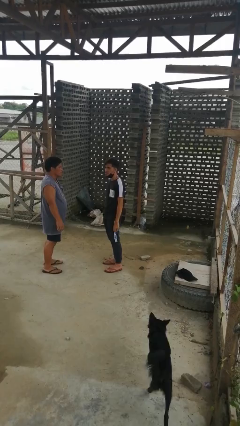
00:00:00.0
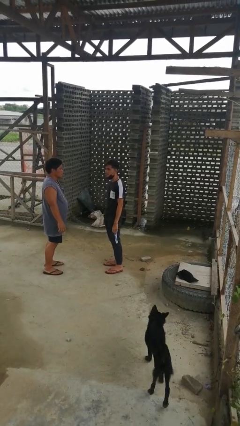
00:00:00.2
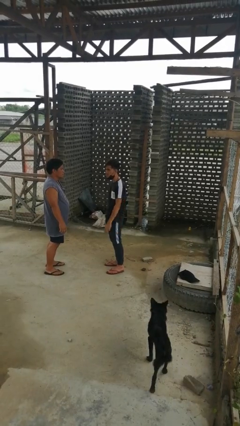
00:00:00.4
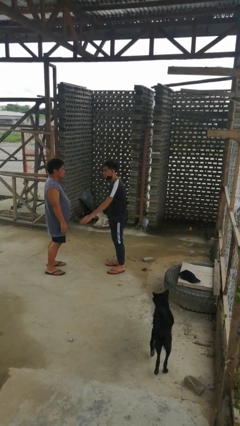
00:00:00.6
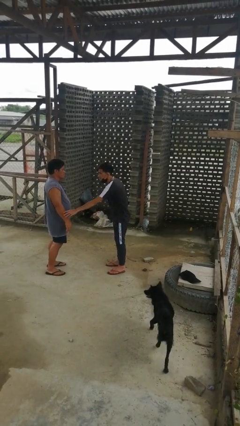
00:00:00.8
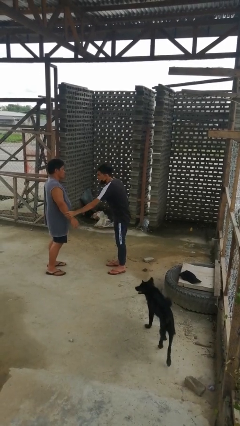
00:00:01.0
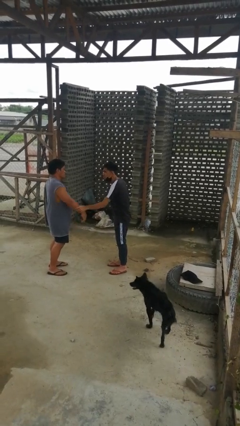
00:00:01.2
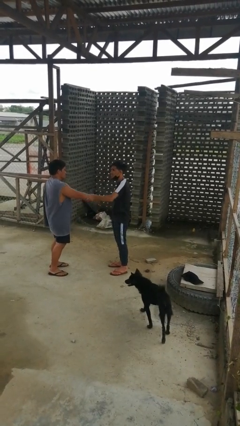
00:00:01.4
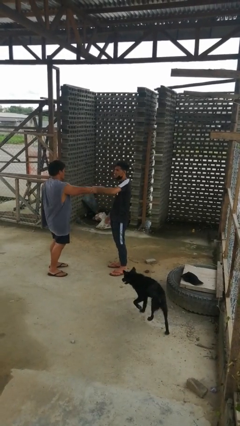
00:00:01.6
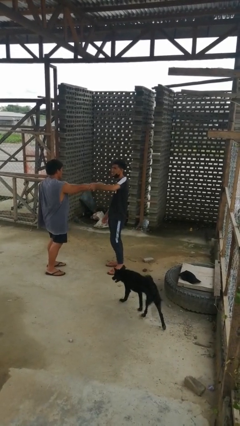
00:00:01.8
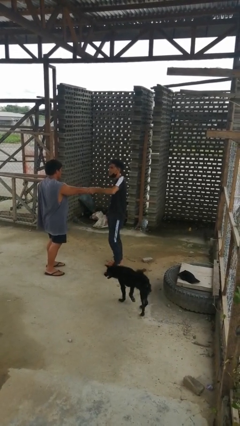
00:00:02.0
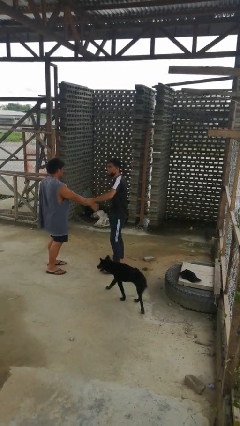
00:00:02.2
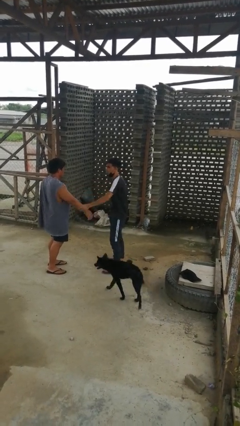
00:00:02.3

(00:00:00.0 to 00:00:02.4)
person grabs person by forearm

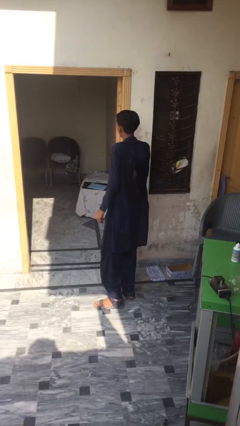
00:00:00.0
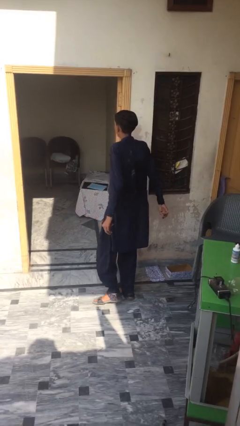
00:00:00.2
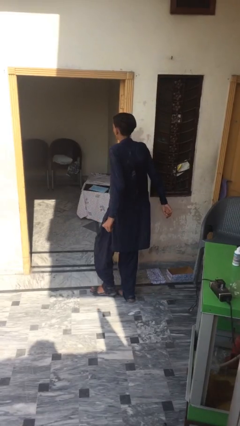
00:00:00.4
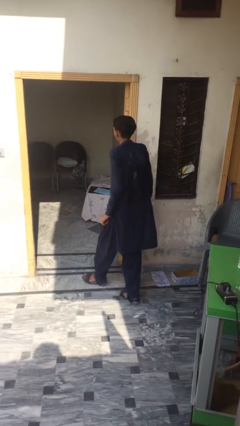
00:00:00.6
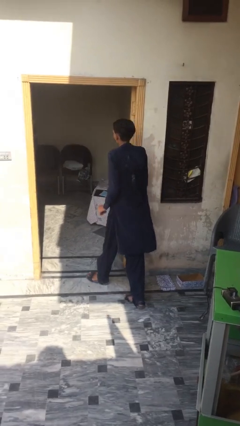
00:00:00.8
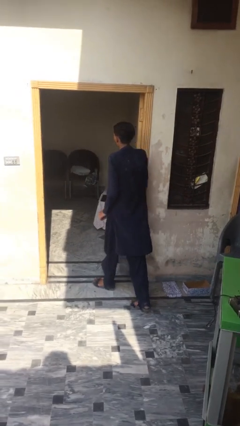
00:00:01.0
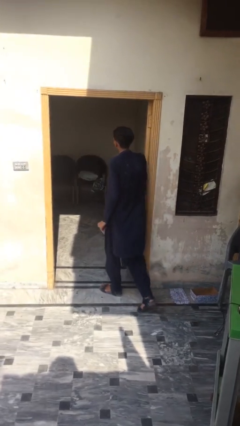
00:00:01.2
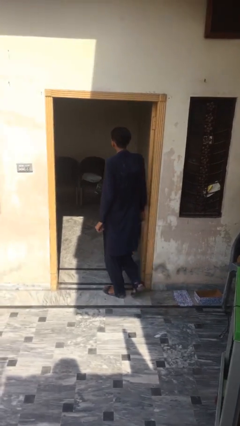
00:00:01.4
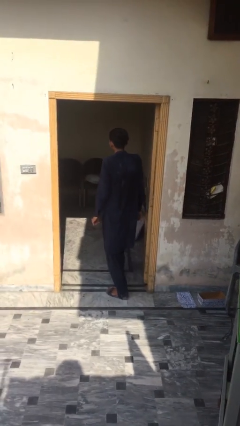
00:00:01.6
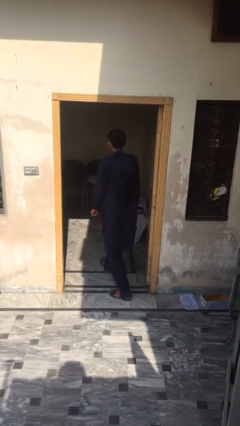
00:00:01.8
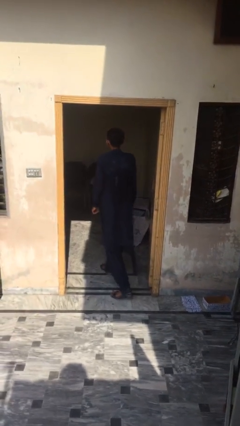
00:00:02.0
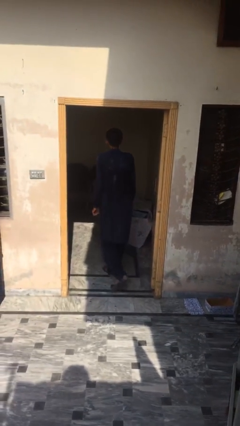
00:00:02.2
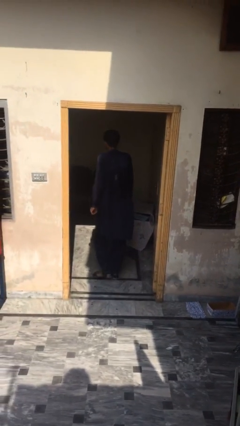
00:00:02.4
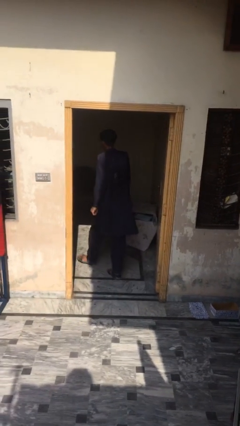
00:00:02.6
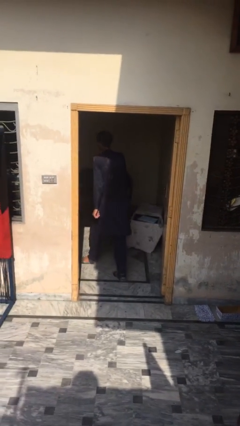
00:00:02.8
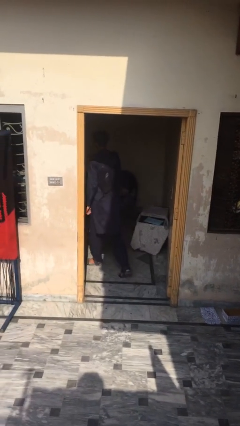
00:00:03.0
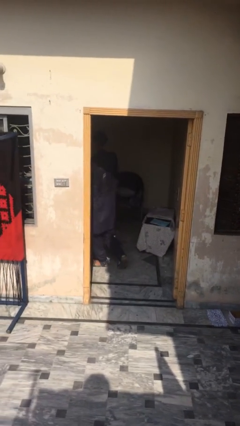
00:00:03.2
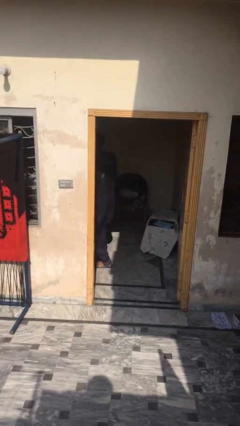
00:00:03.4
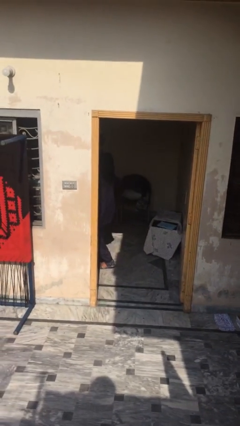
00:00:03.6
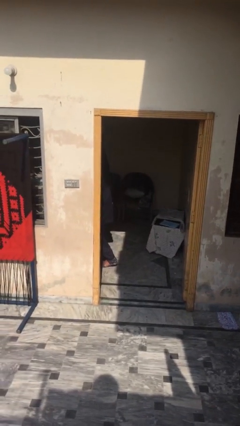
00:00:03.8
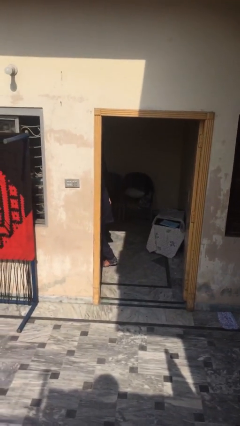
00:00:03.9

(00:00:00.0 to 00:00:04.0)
person exits scene through structure

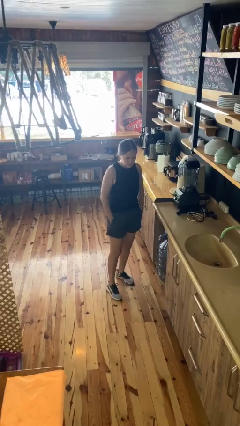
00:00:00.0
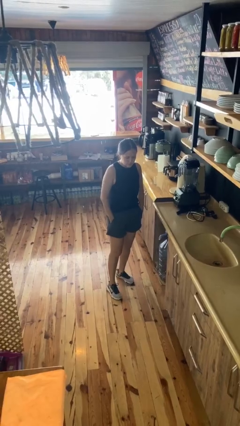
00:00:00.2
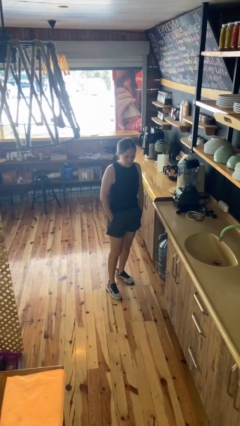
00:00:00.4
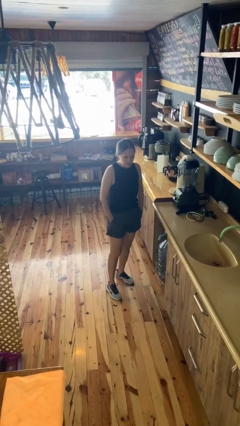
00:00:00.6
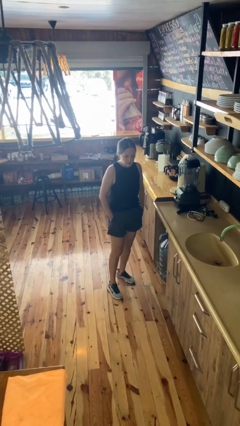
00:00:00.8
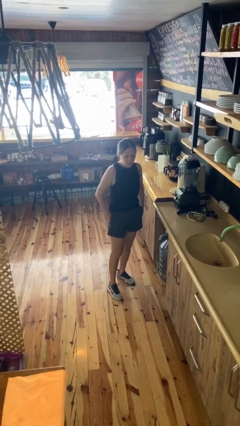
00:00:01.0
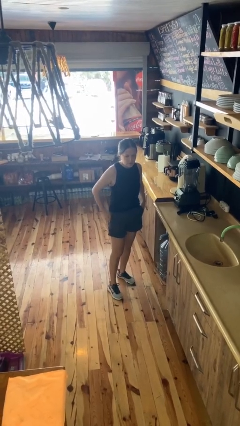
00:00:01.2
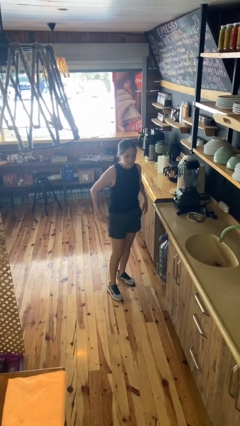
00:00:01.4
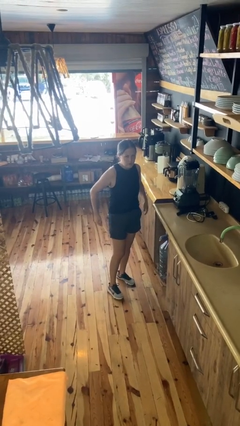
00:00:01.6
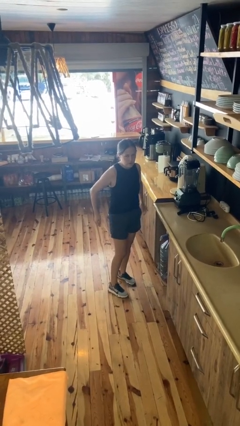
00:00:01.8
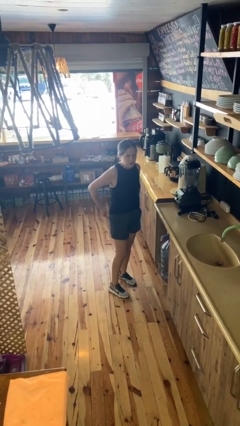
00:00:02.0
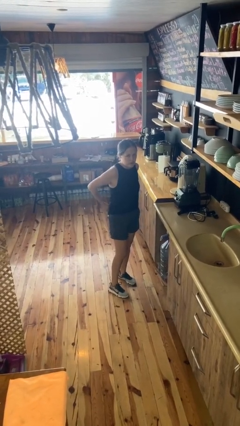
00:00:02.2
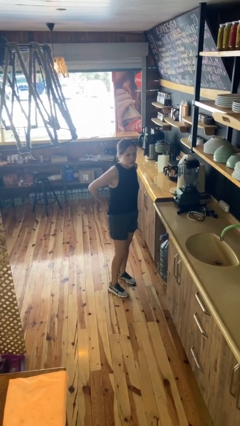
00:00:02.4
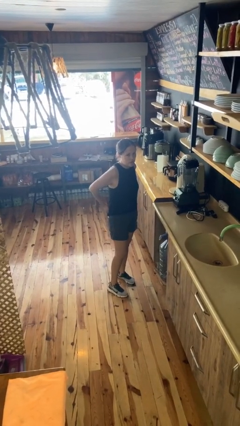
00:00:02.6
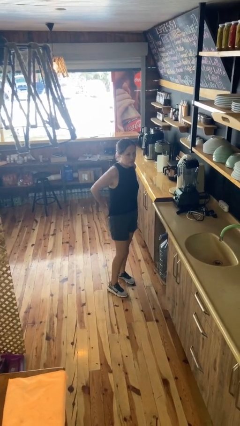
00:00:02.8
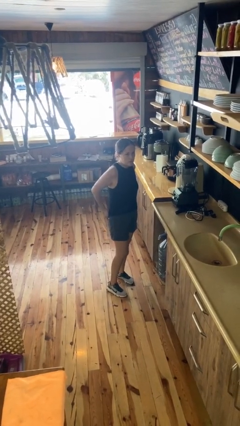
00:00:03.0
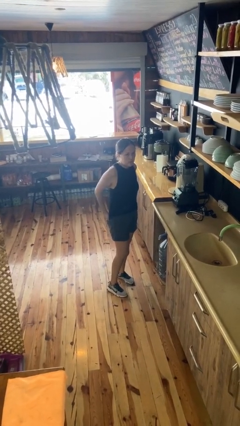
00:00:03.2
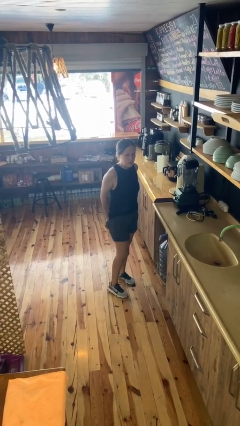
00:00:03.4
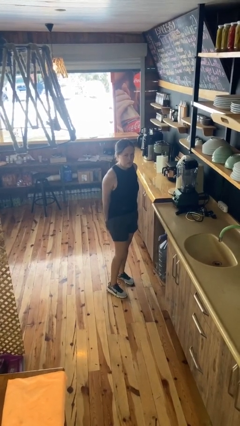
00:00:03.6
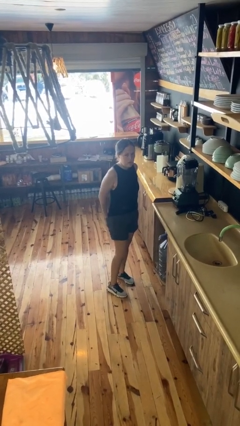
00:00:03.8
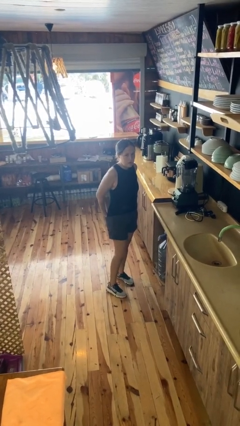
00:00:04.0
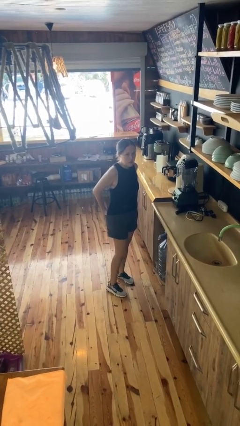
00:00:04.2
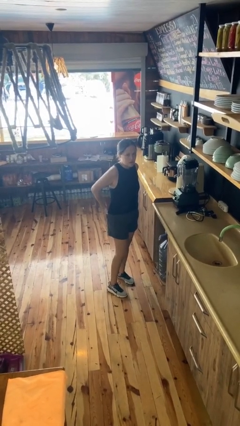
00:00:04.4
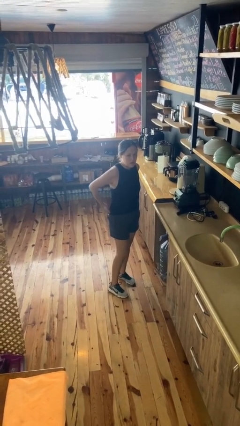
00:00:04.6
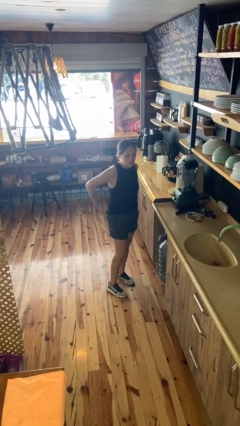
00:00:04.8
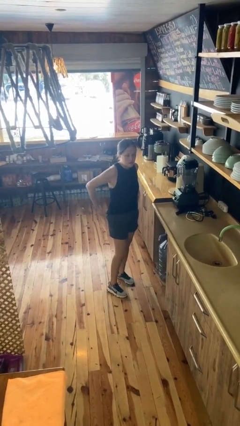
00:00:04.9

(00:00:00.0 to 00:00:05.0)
person puts hands in back pockets

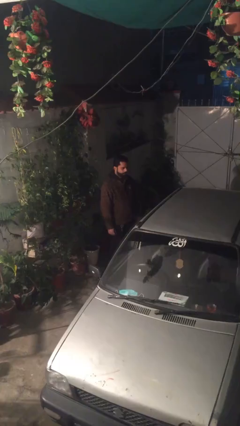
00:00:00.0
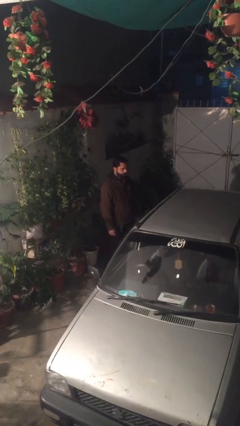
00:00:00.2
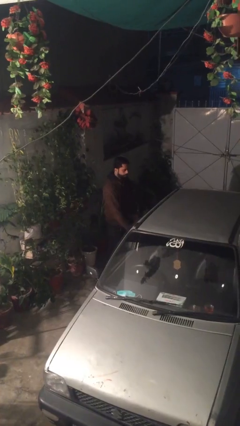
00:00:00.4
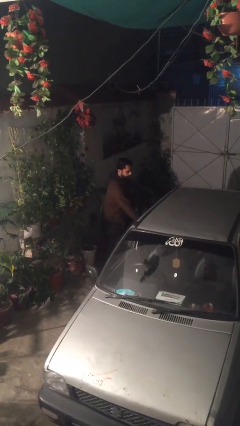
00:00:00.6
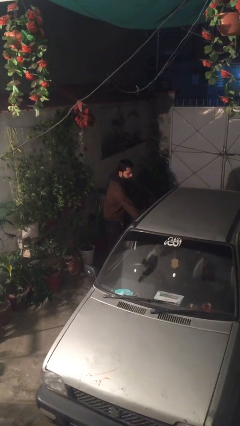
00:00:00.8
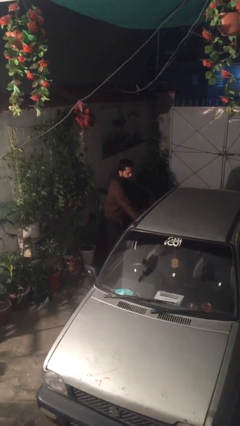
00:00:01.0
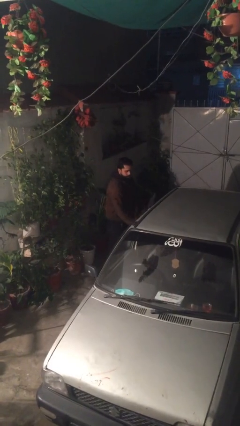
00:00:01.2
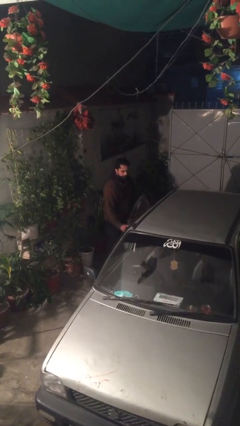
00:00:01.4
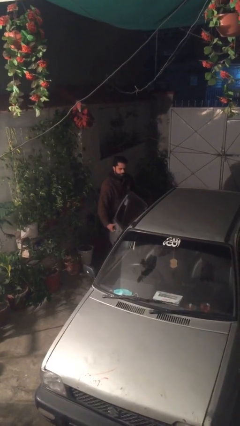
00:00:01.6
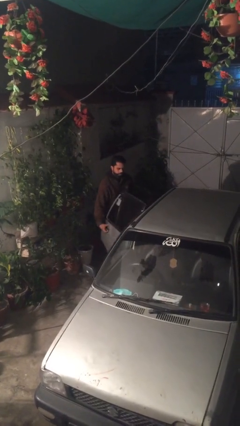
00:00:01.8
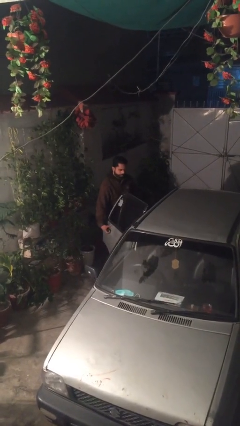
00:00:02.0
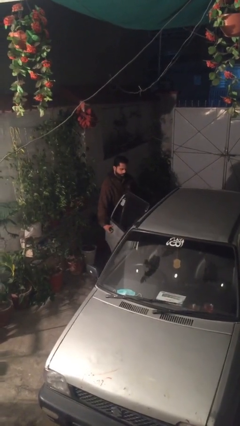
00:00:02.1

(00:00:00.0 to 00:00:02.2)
person opens car door

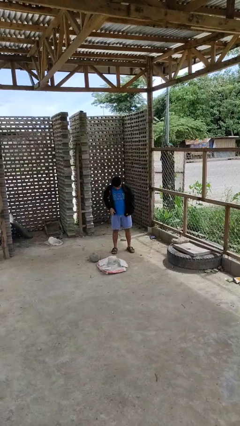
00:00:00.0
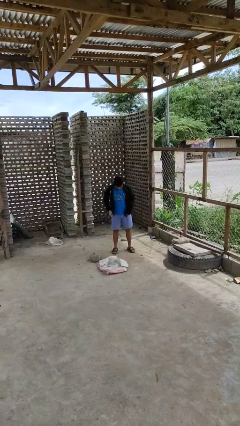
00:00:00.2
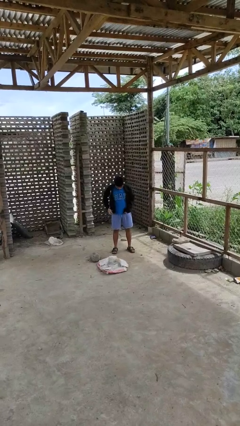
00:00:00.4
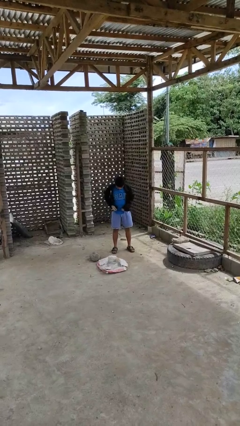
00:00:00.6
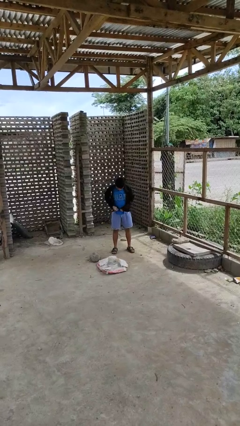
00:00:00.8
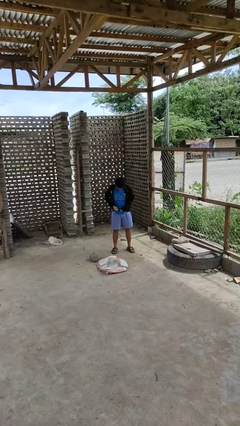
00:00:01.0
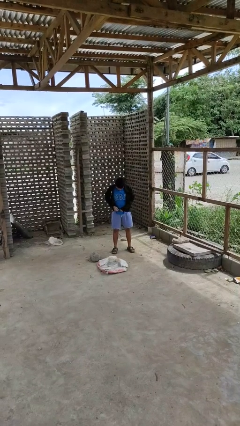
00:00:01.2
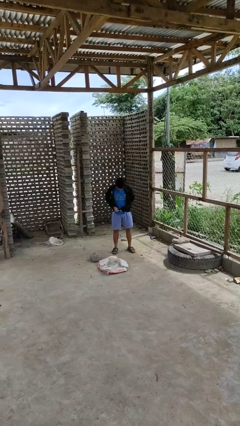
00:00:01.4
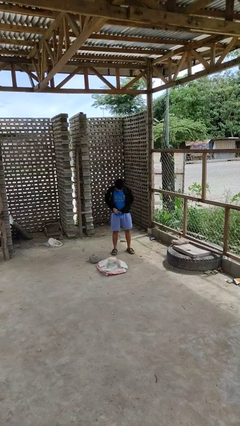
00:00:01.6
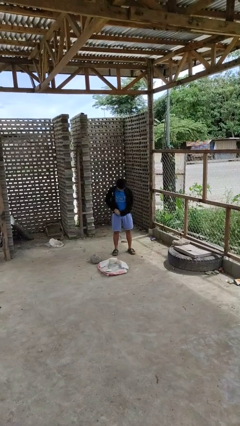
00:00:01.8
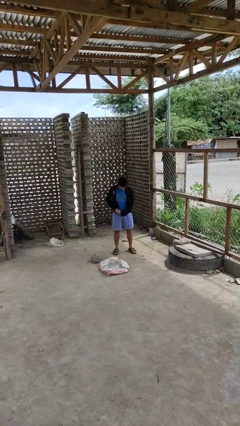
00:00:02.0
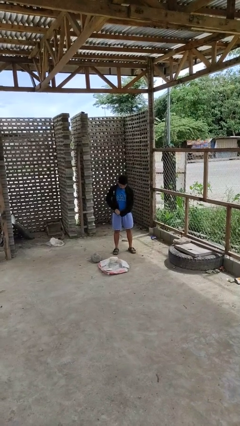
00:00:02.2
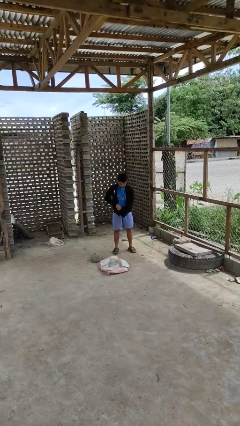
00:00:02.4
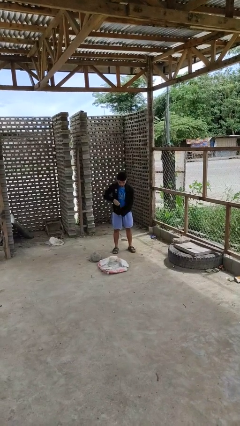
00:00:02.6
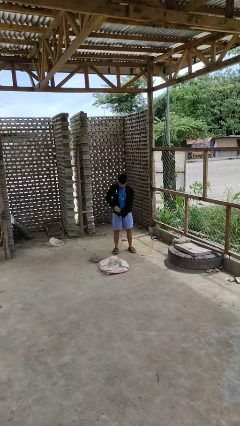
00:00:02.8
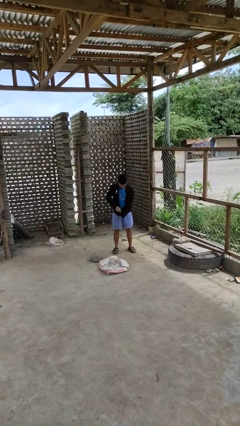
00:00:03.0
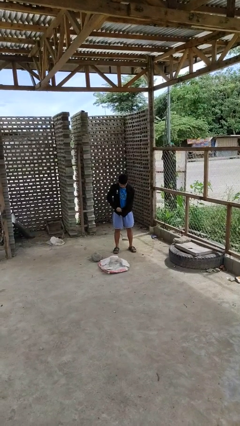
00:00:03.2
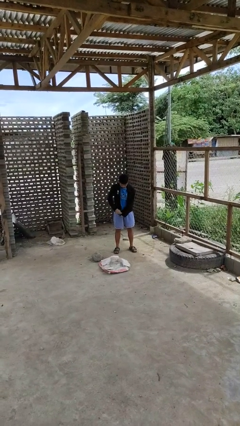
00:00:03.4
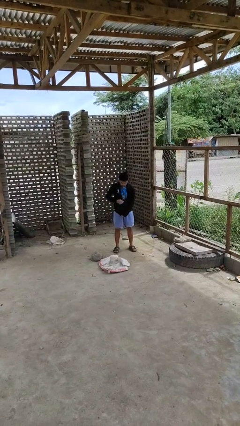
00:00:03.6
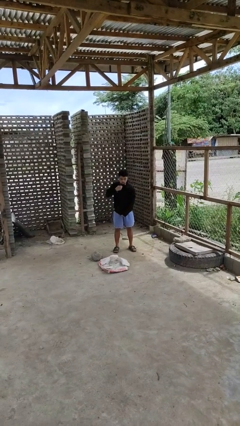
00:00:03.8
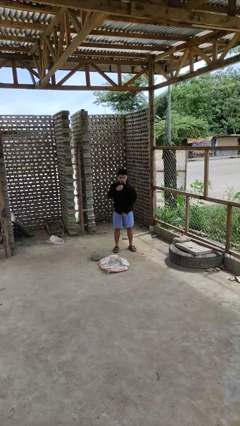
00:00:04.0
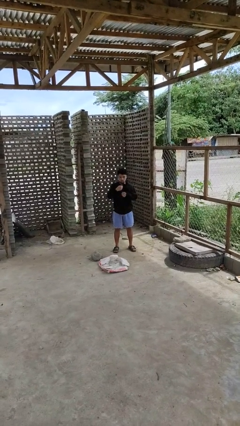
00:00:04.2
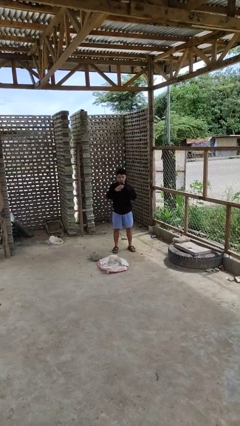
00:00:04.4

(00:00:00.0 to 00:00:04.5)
person zips up jacket

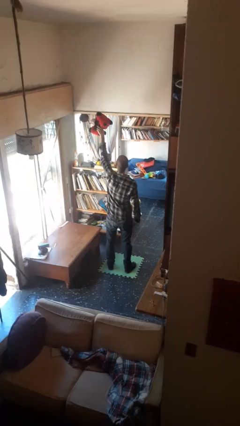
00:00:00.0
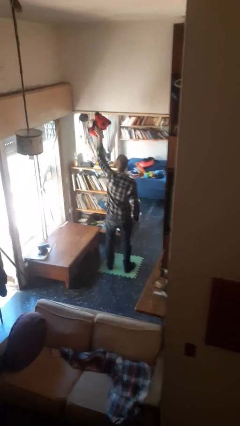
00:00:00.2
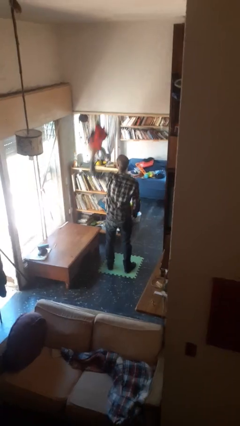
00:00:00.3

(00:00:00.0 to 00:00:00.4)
person drops object